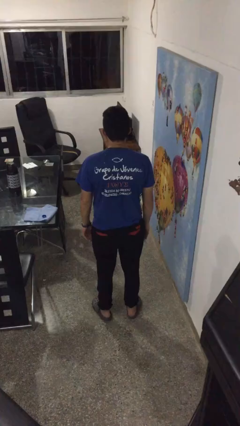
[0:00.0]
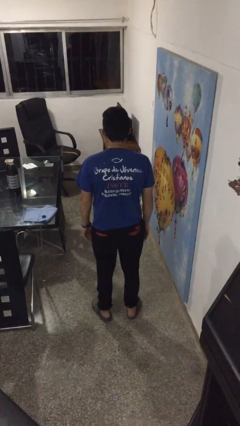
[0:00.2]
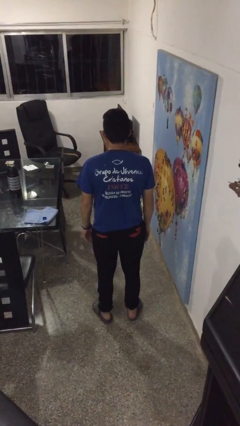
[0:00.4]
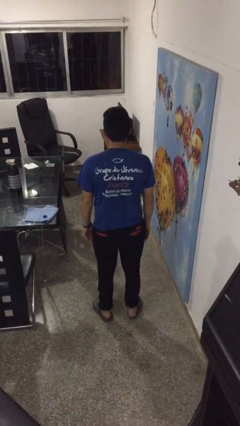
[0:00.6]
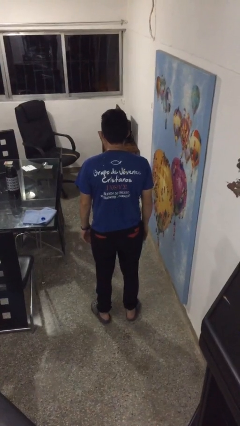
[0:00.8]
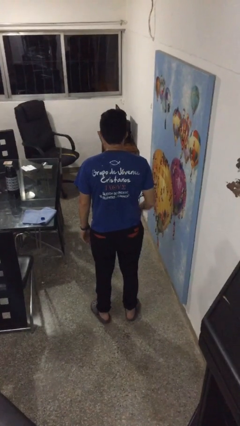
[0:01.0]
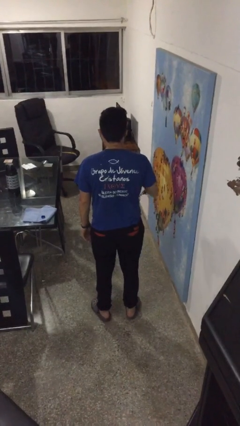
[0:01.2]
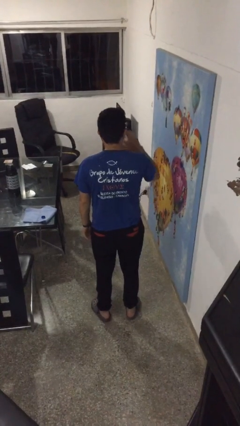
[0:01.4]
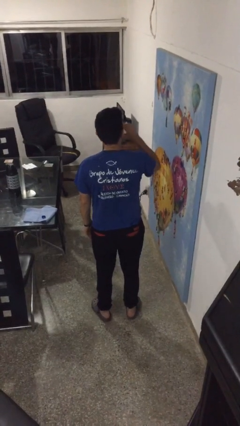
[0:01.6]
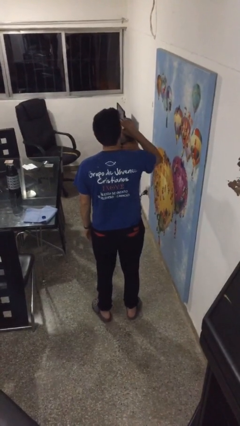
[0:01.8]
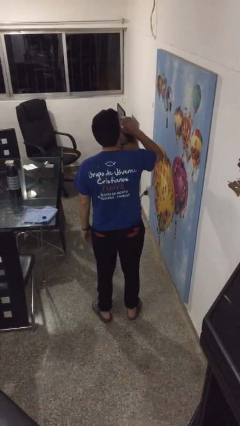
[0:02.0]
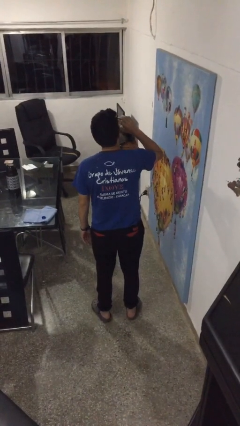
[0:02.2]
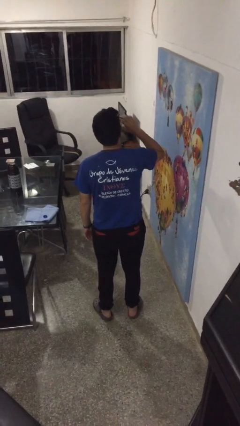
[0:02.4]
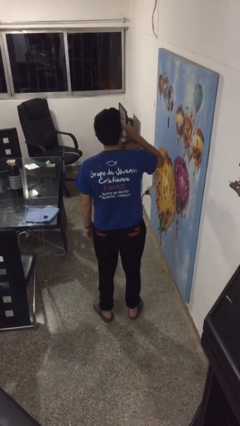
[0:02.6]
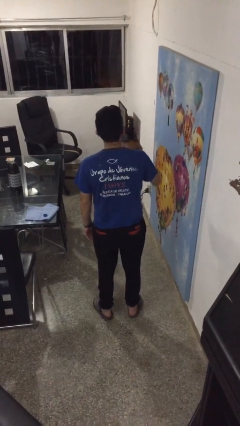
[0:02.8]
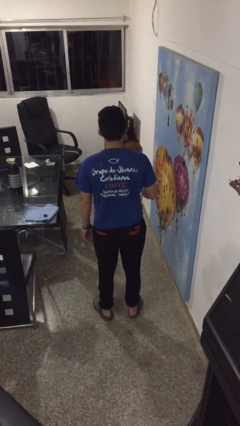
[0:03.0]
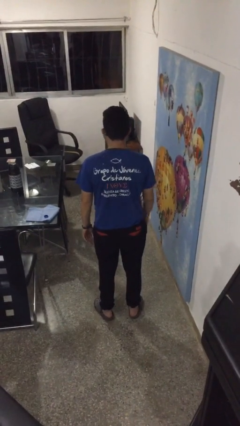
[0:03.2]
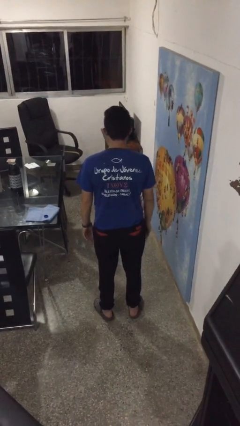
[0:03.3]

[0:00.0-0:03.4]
person drinks from bottle

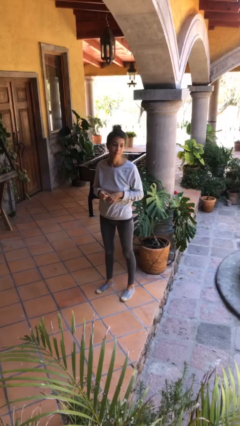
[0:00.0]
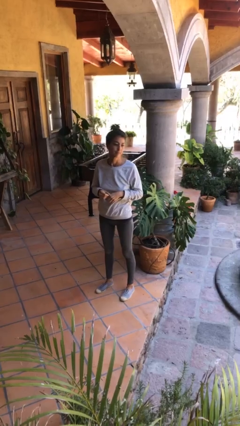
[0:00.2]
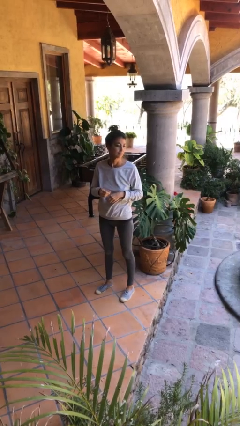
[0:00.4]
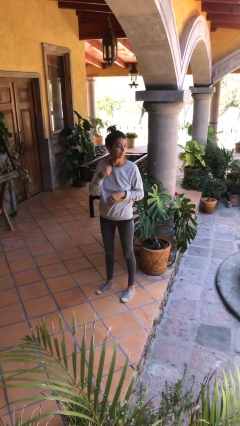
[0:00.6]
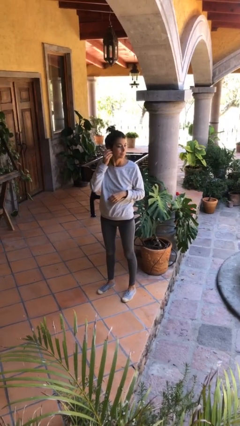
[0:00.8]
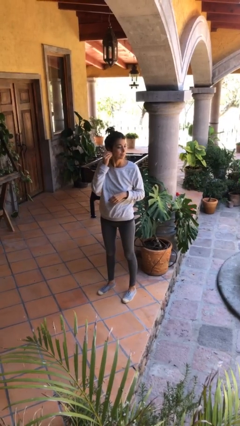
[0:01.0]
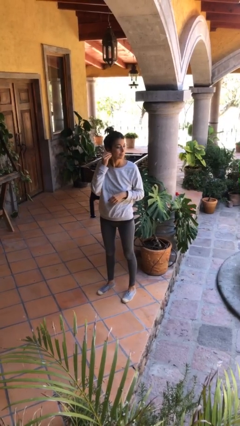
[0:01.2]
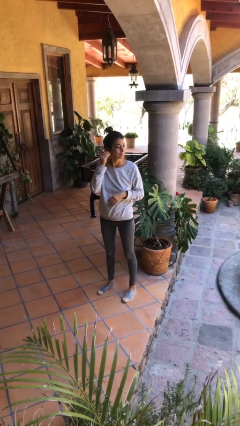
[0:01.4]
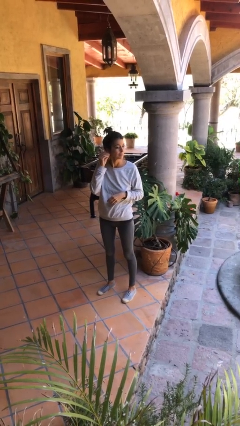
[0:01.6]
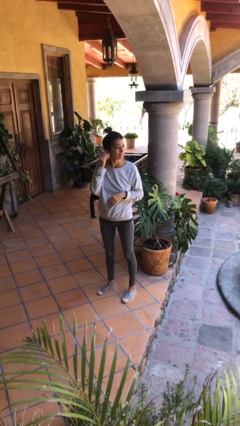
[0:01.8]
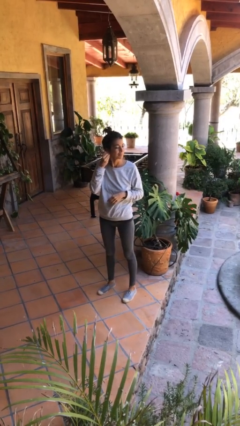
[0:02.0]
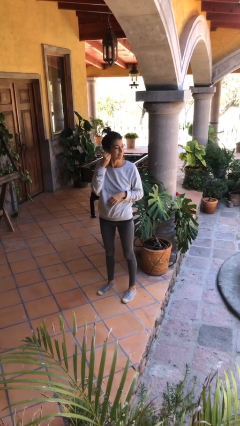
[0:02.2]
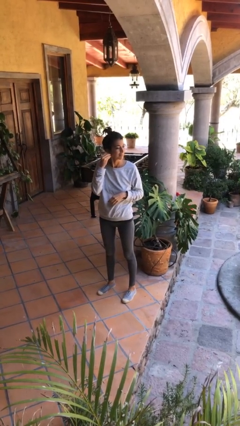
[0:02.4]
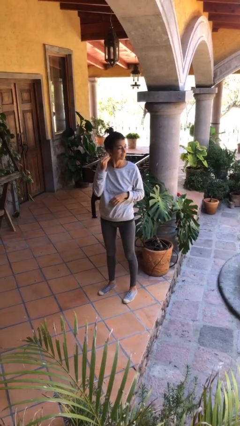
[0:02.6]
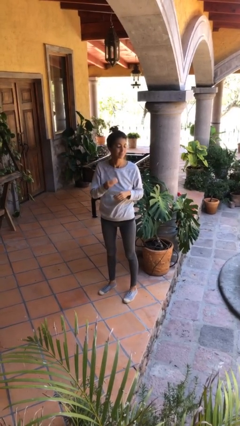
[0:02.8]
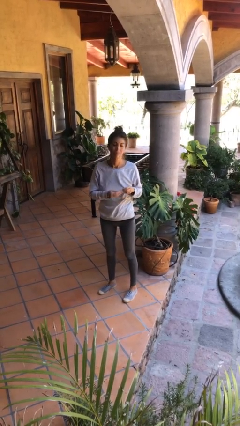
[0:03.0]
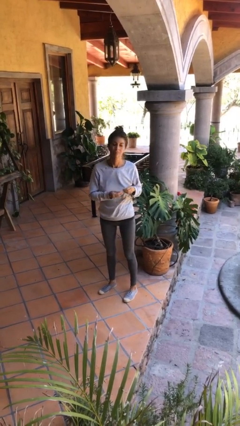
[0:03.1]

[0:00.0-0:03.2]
person takes off earrings

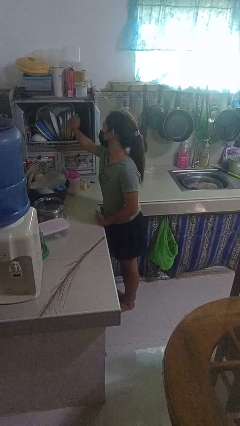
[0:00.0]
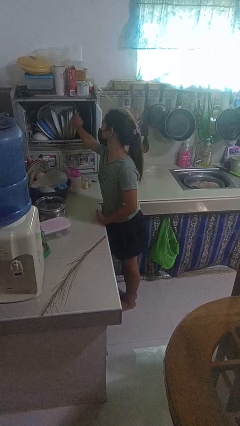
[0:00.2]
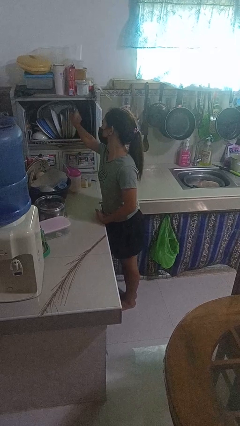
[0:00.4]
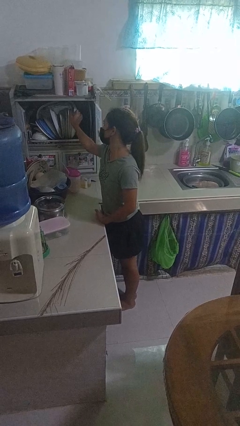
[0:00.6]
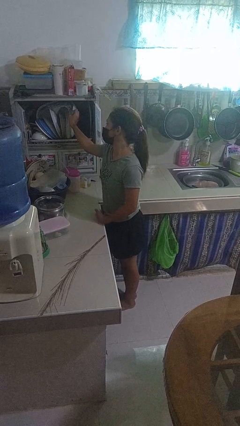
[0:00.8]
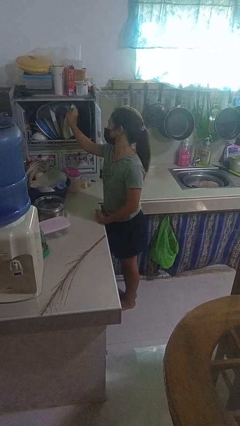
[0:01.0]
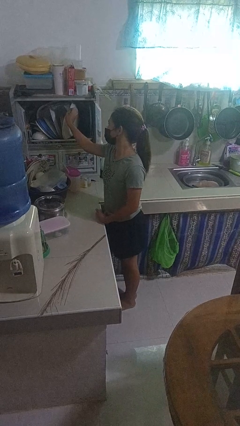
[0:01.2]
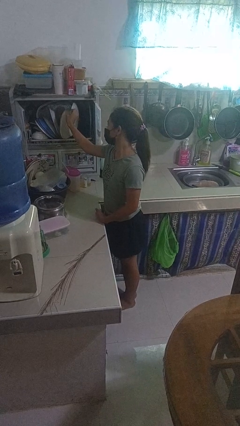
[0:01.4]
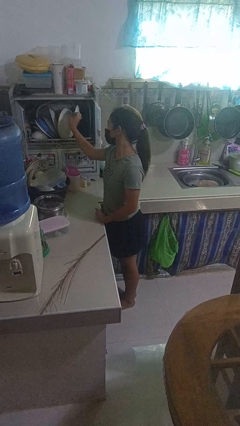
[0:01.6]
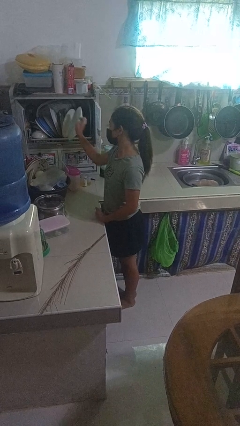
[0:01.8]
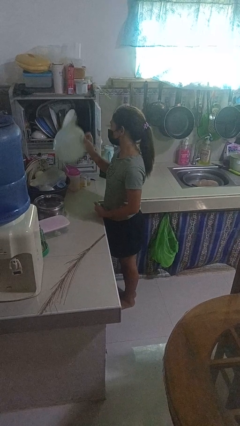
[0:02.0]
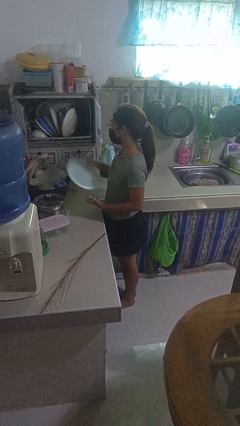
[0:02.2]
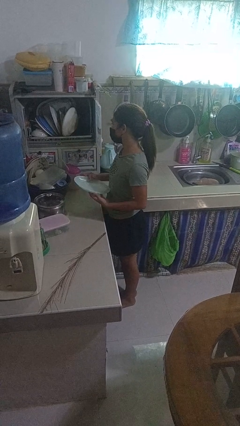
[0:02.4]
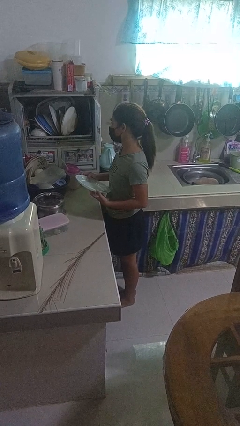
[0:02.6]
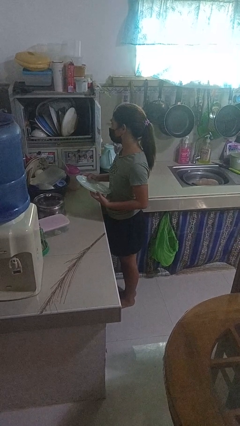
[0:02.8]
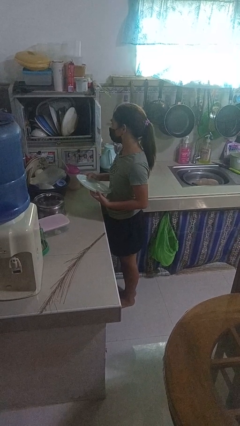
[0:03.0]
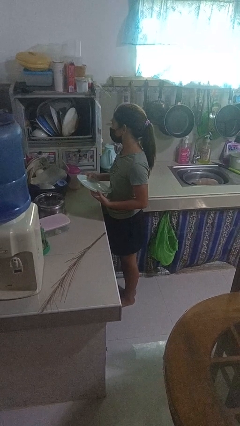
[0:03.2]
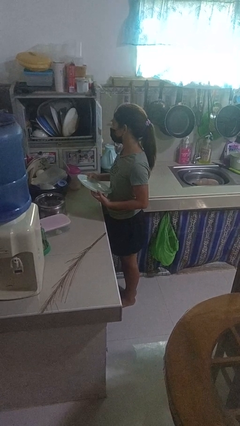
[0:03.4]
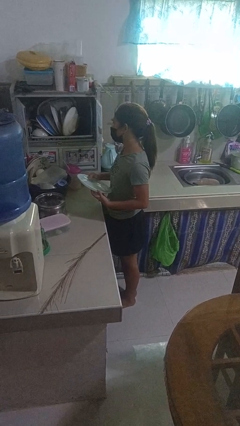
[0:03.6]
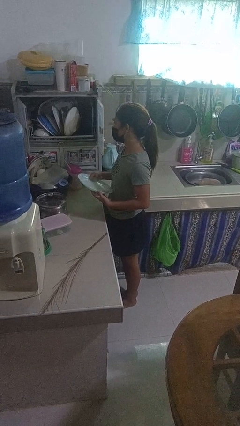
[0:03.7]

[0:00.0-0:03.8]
person takes object from kitchen drawer

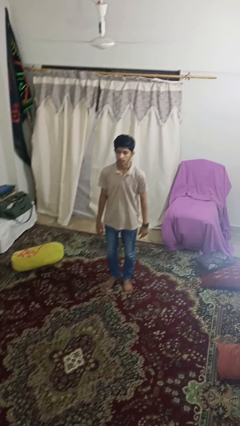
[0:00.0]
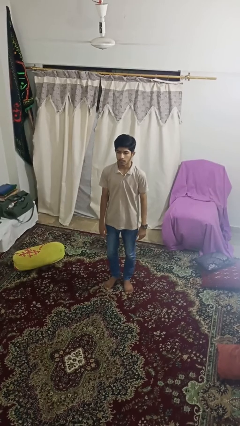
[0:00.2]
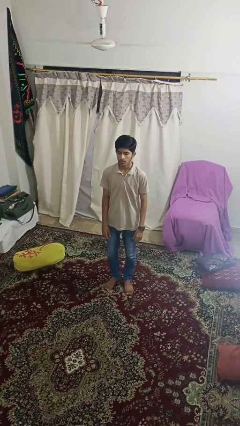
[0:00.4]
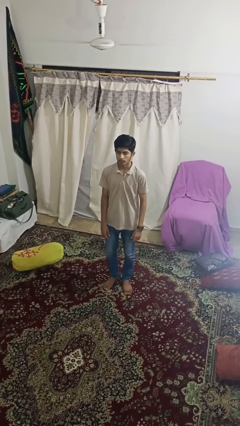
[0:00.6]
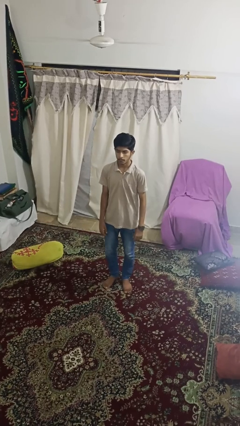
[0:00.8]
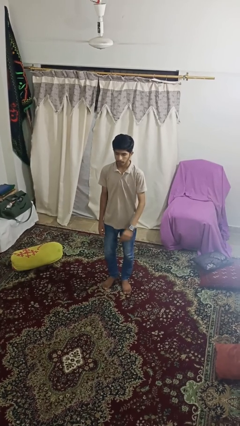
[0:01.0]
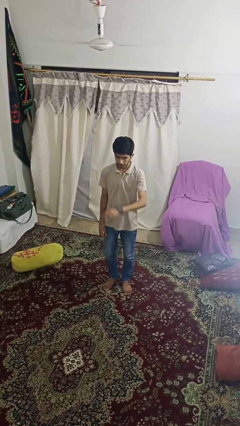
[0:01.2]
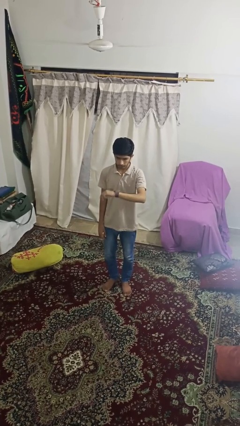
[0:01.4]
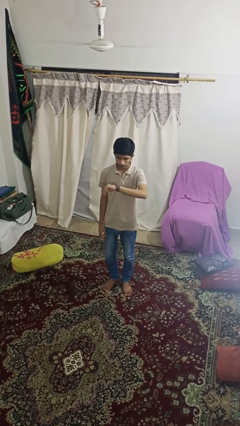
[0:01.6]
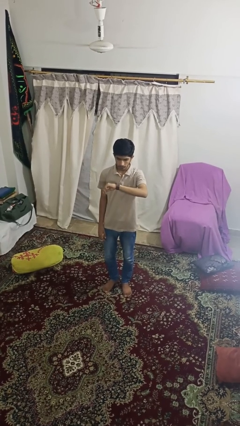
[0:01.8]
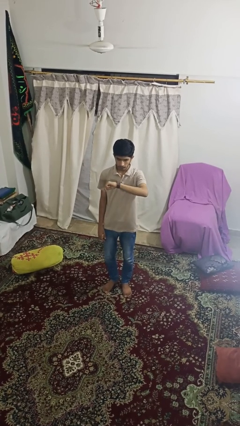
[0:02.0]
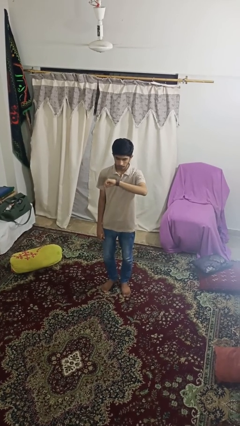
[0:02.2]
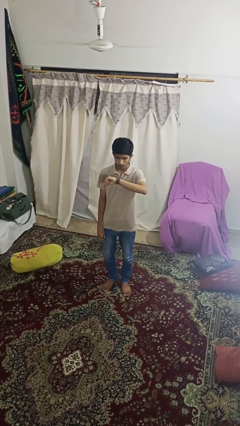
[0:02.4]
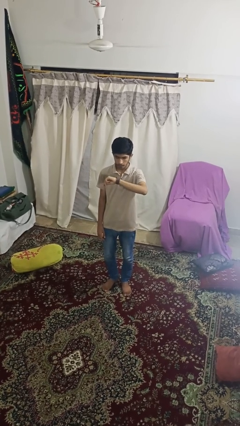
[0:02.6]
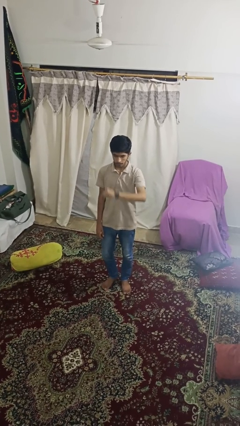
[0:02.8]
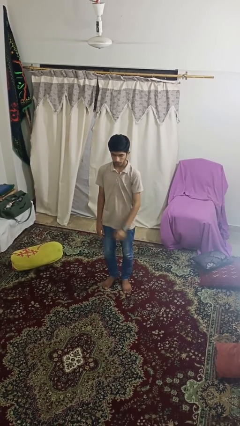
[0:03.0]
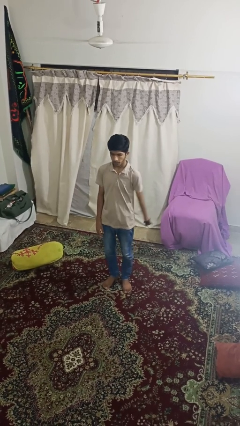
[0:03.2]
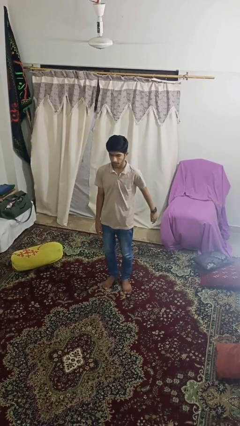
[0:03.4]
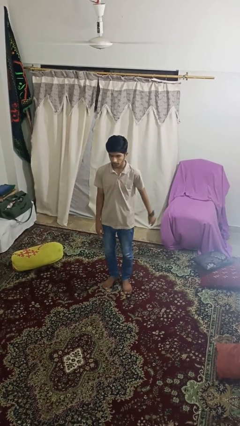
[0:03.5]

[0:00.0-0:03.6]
person looks at wristwatch

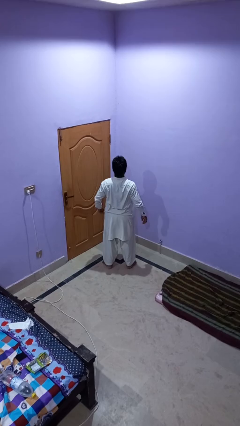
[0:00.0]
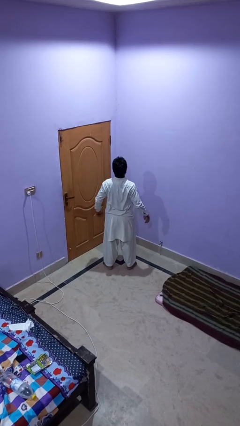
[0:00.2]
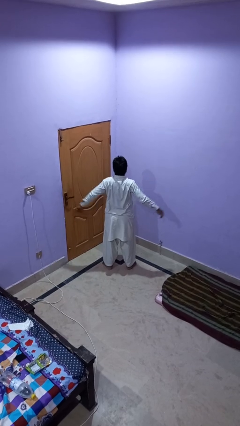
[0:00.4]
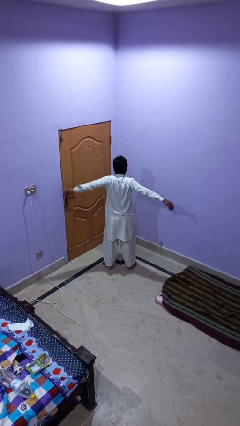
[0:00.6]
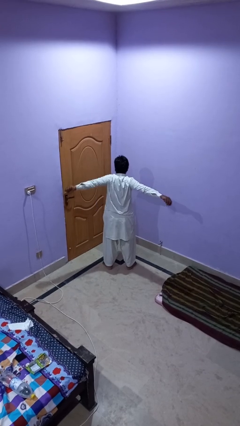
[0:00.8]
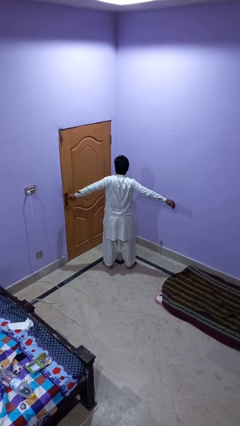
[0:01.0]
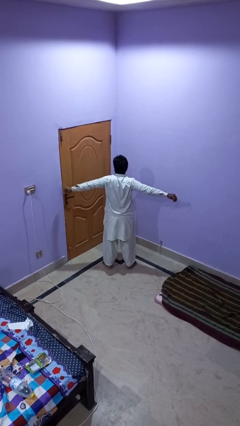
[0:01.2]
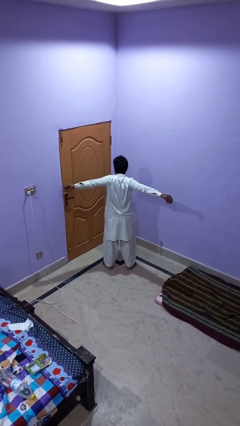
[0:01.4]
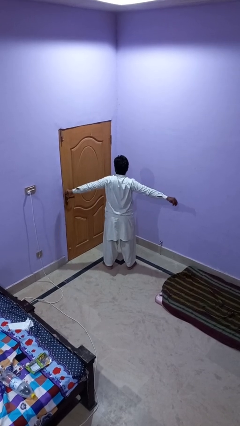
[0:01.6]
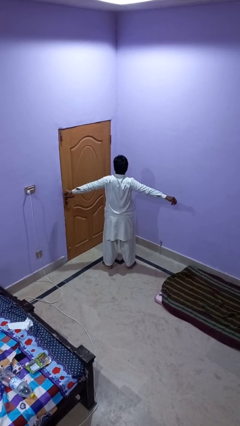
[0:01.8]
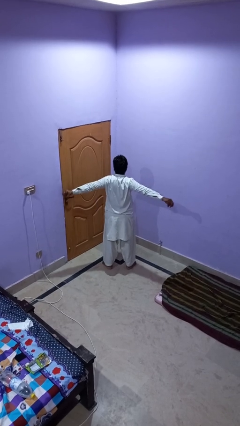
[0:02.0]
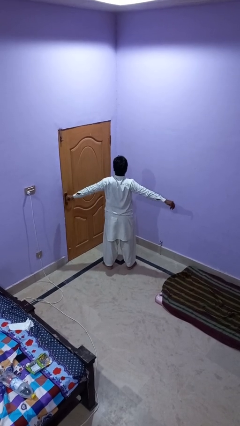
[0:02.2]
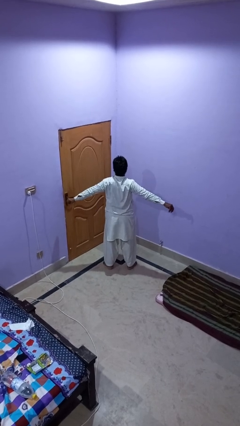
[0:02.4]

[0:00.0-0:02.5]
person stretches arms to side

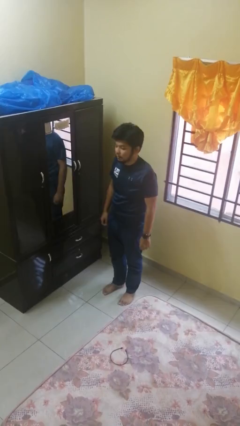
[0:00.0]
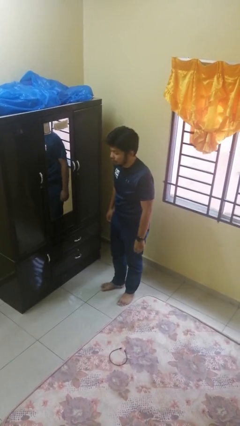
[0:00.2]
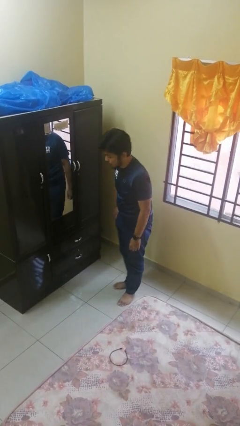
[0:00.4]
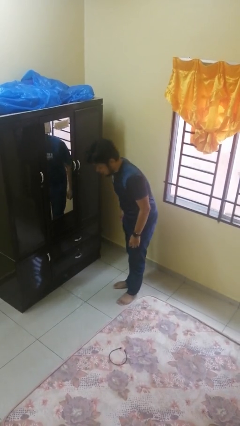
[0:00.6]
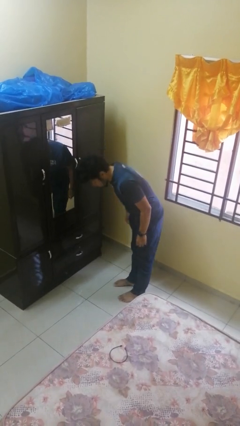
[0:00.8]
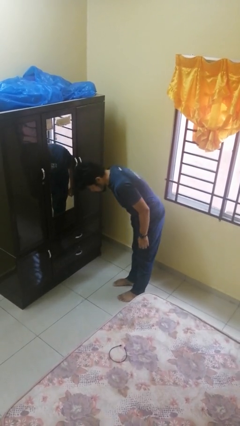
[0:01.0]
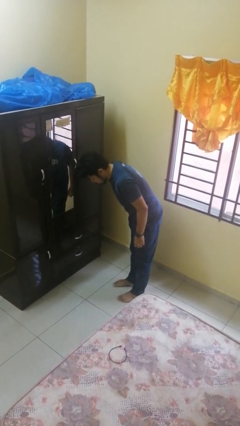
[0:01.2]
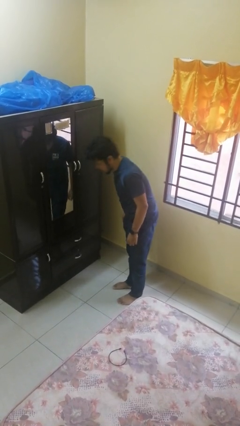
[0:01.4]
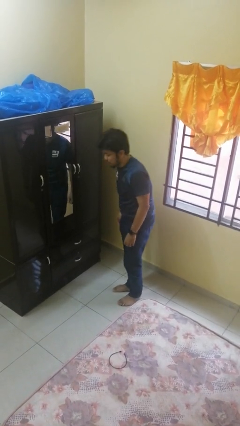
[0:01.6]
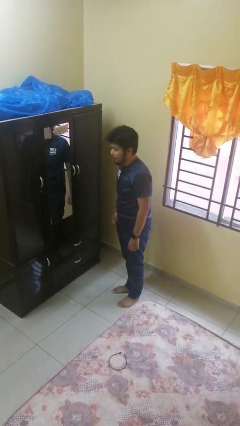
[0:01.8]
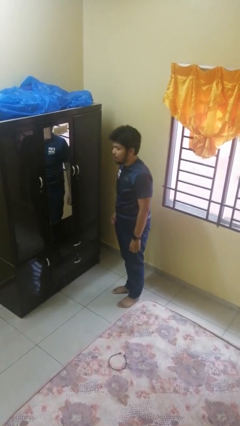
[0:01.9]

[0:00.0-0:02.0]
person bows
